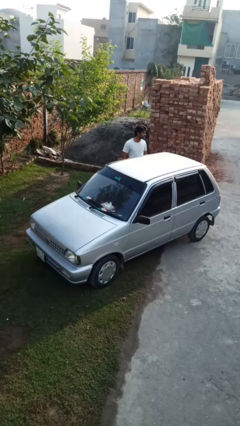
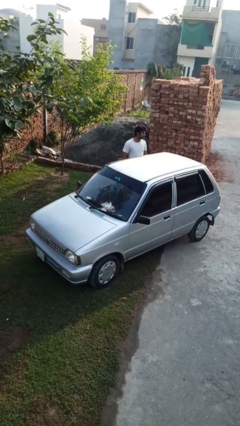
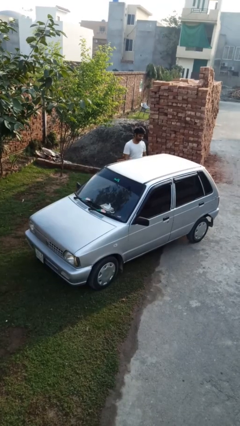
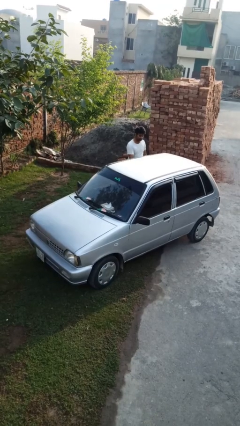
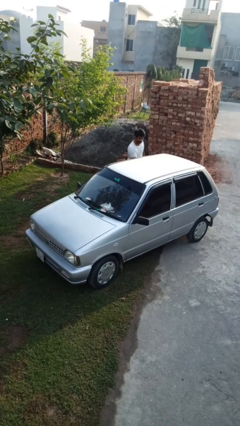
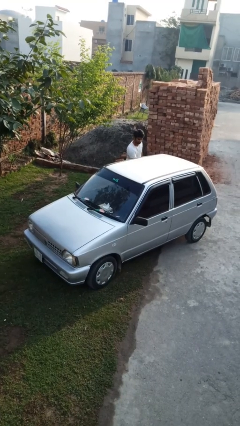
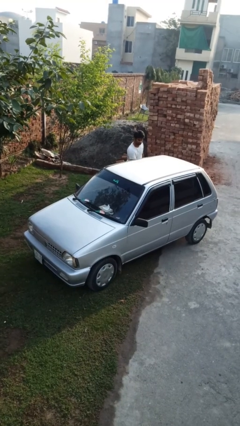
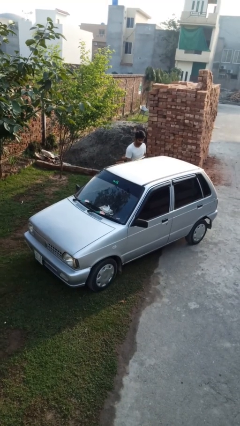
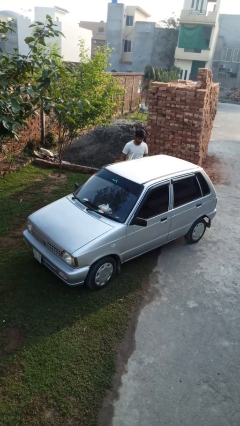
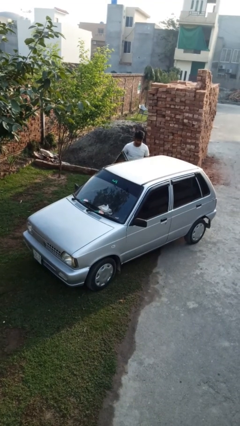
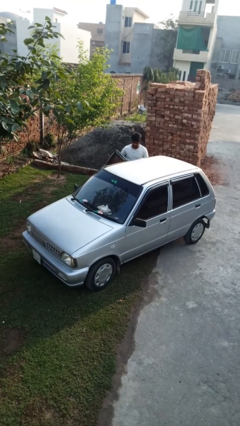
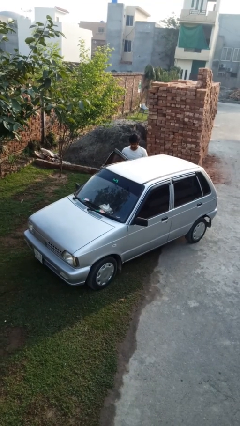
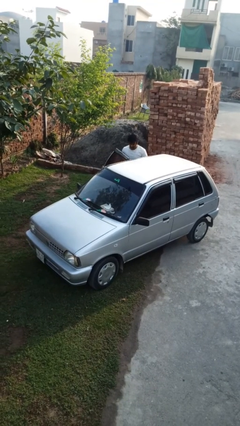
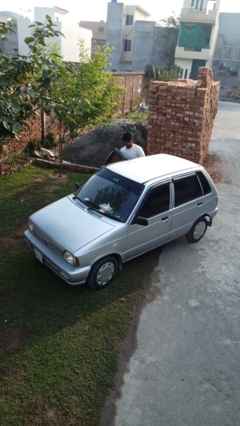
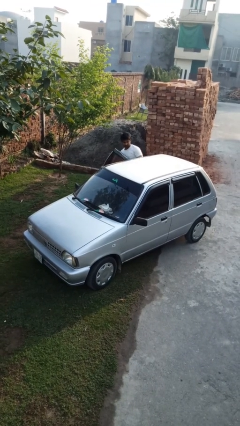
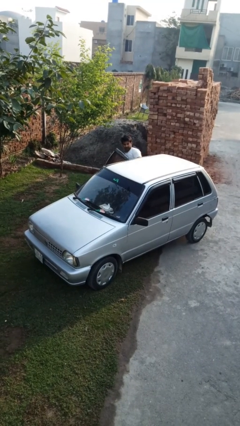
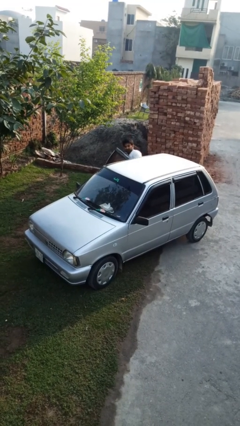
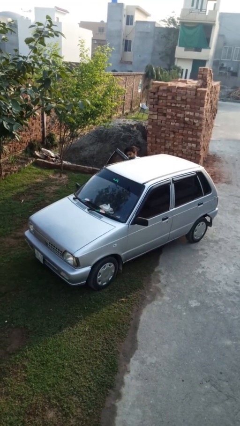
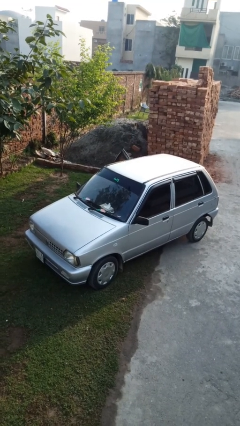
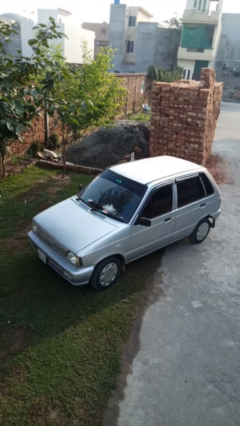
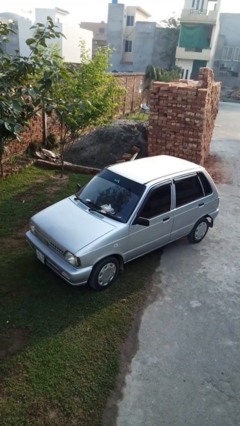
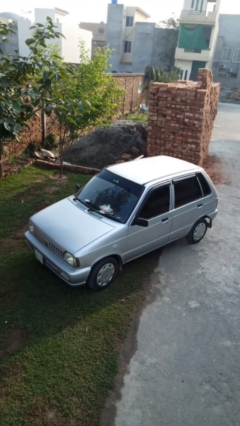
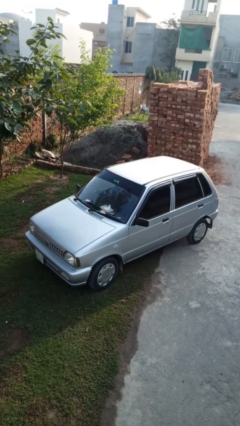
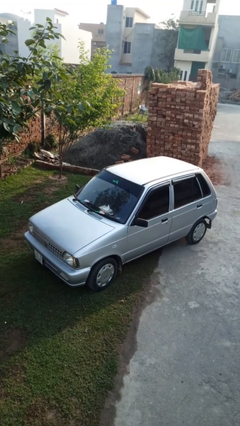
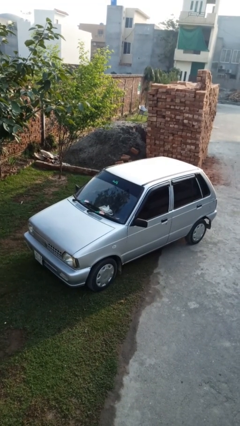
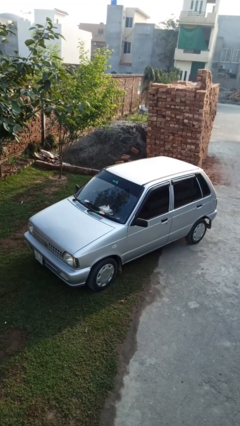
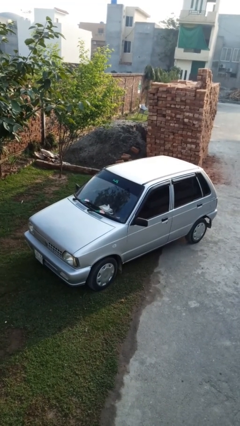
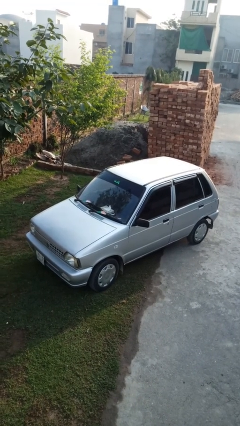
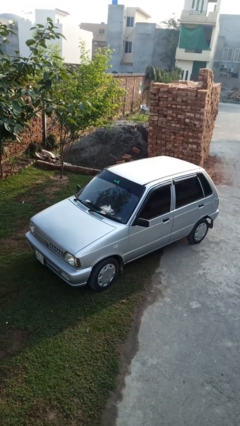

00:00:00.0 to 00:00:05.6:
car picks up person

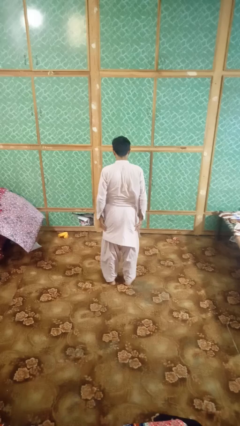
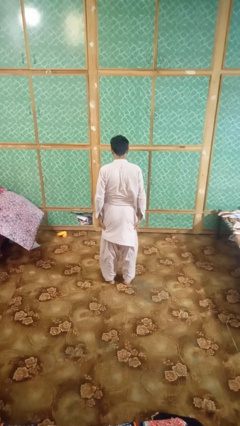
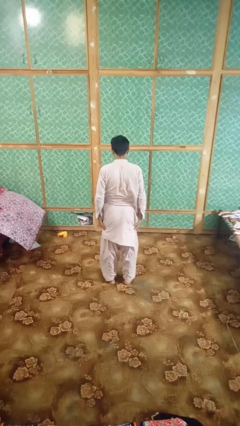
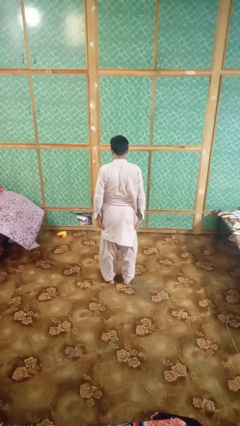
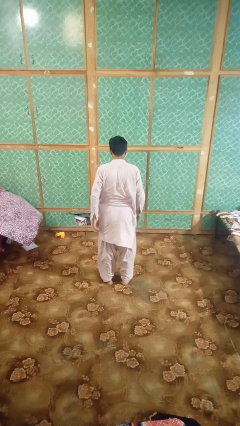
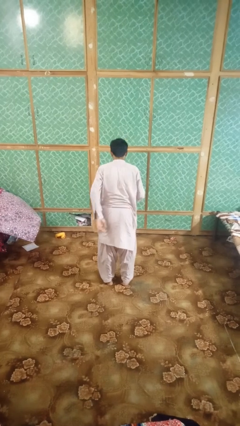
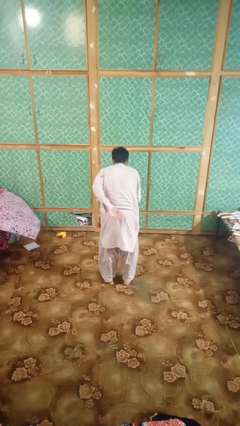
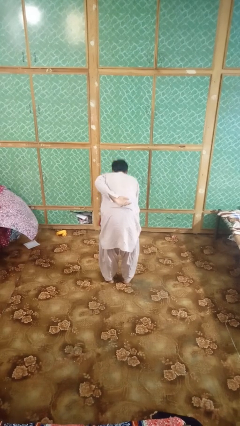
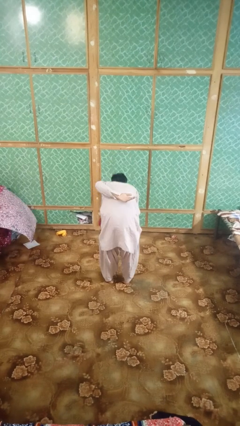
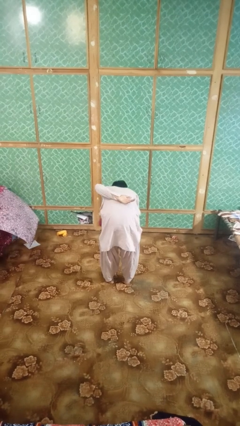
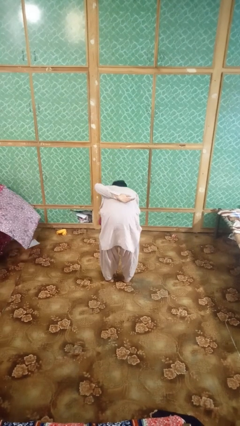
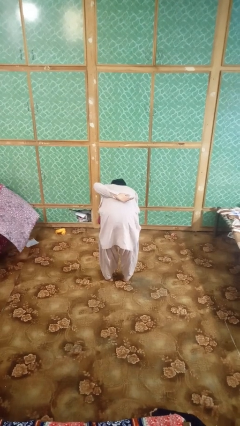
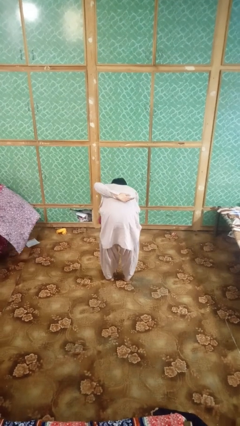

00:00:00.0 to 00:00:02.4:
person bows

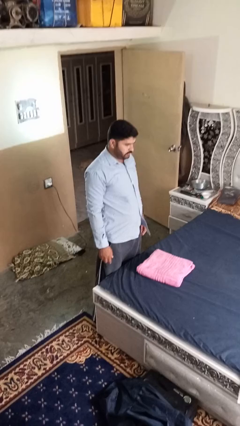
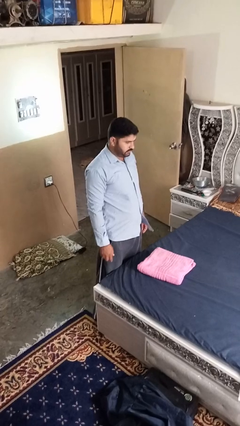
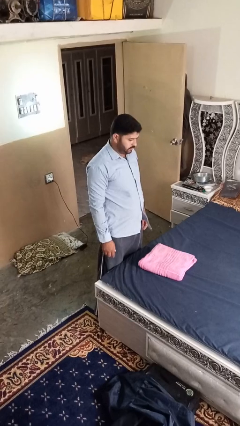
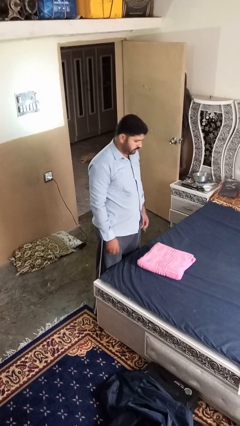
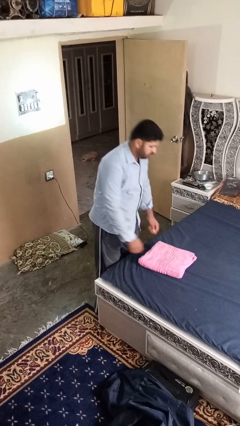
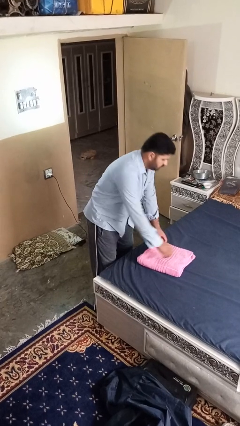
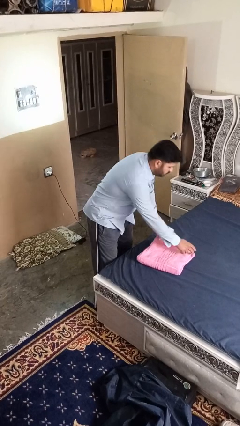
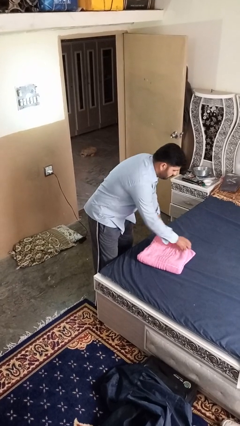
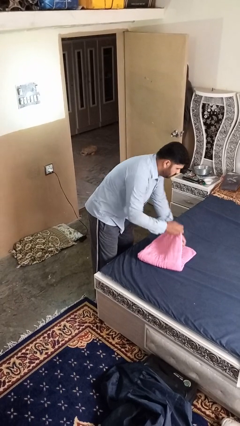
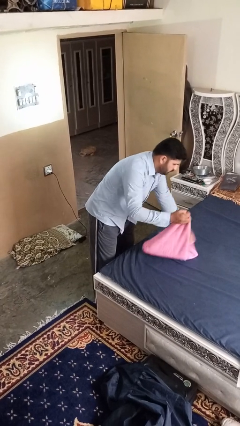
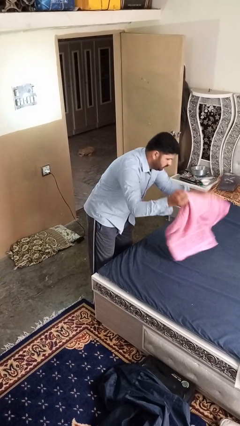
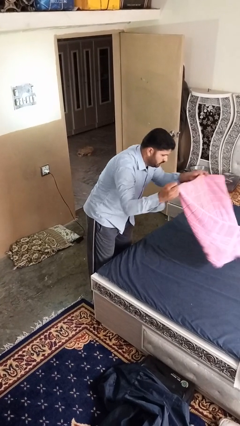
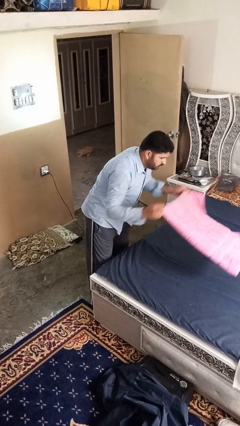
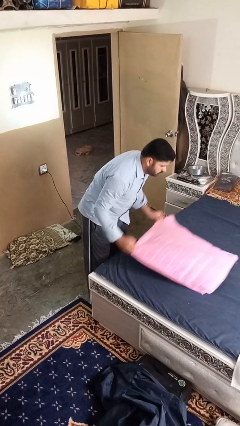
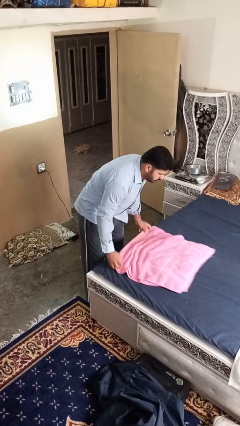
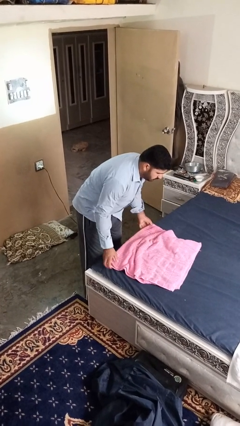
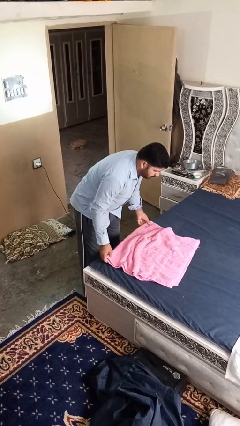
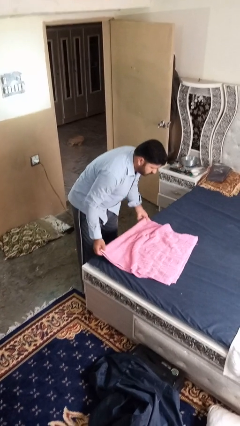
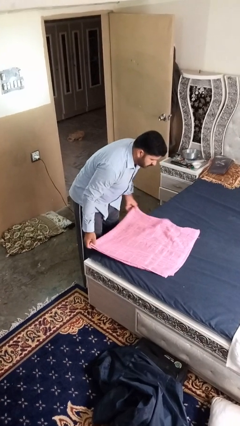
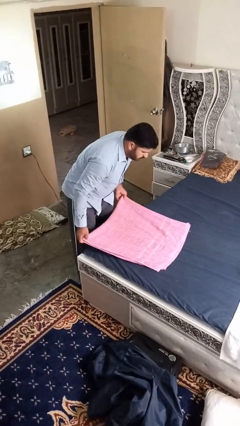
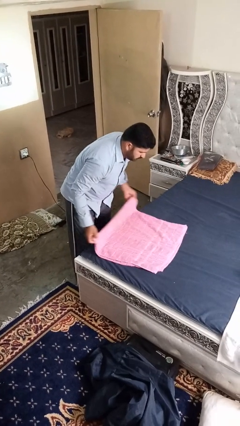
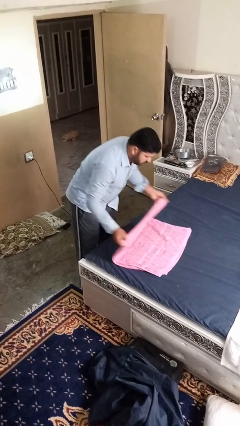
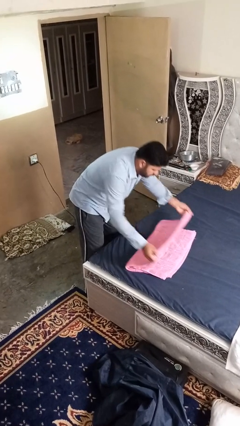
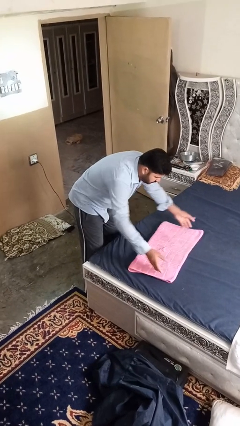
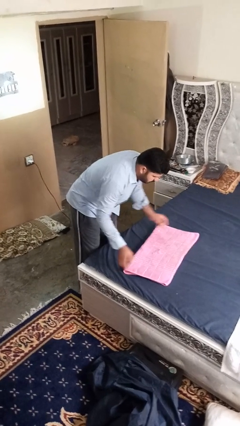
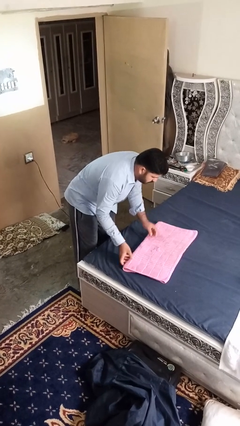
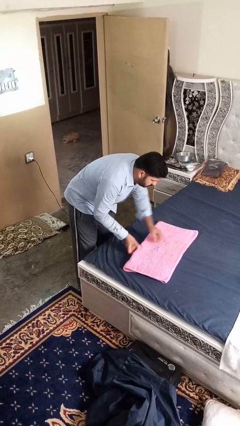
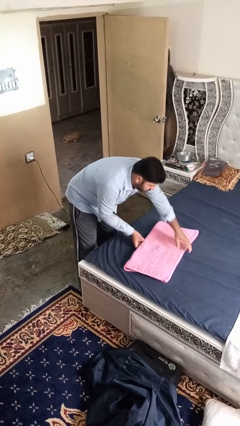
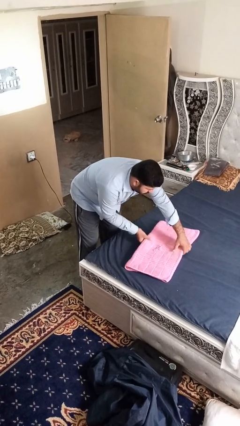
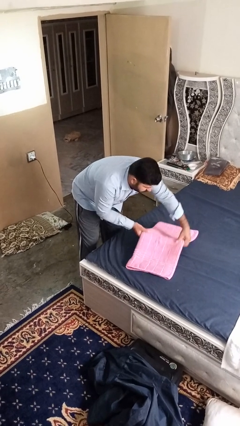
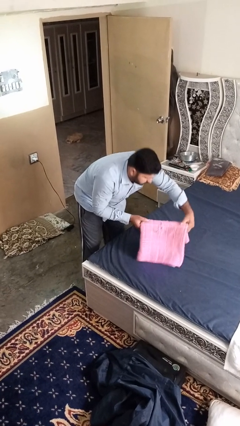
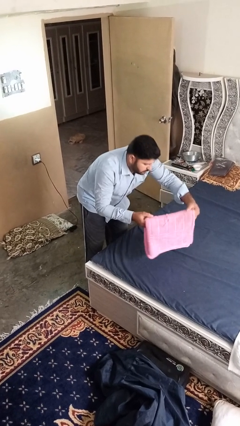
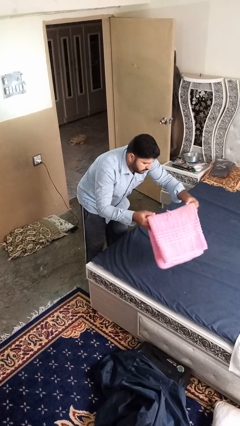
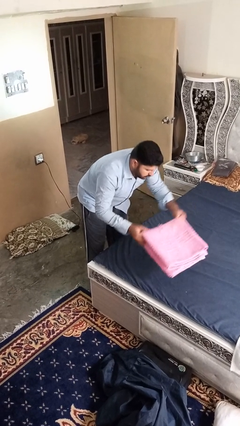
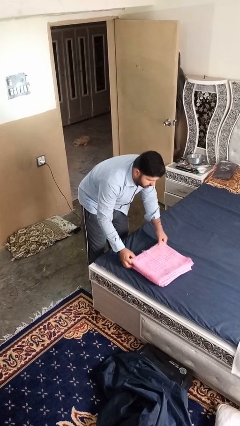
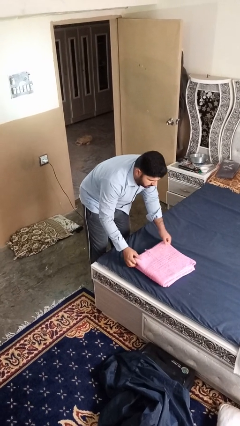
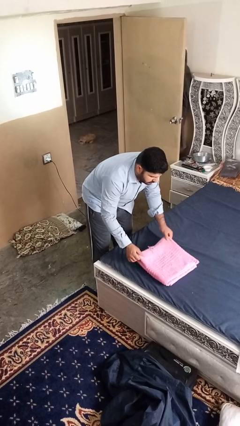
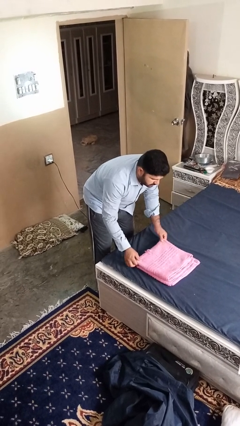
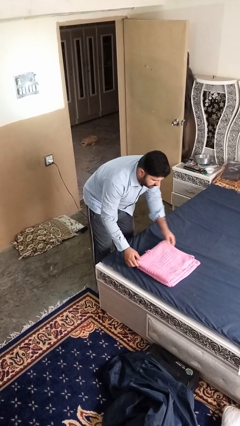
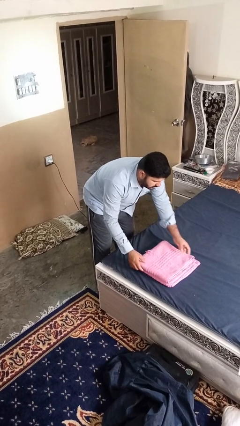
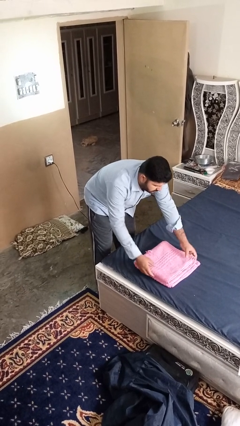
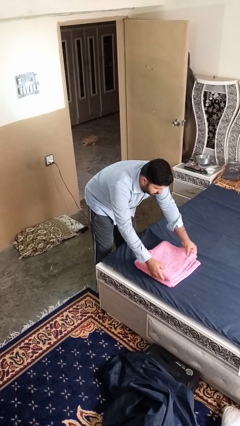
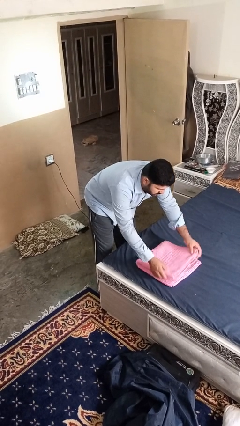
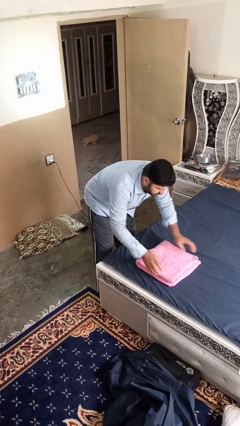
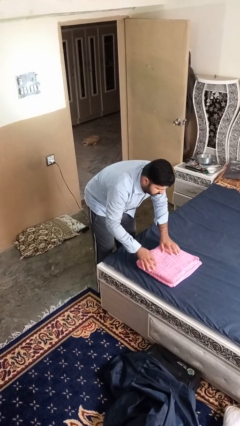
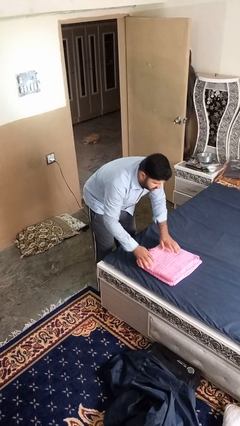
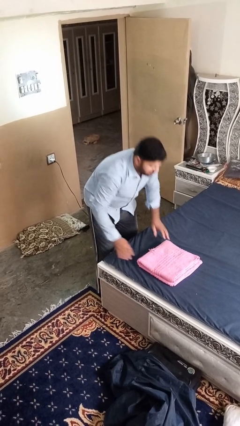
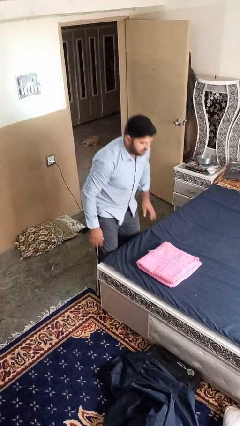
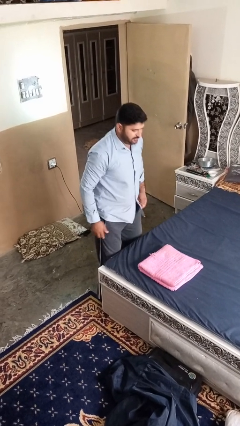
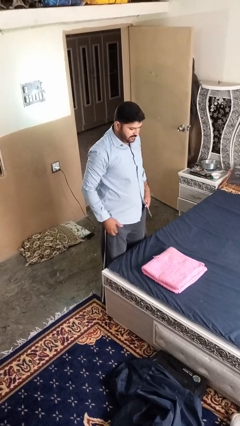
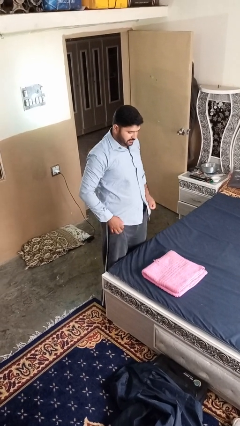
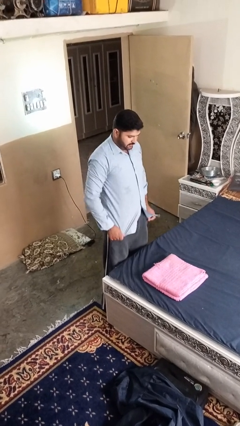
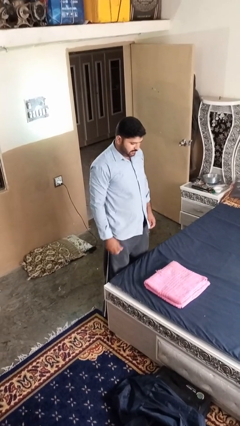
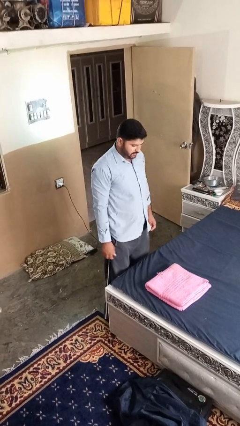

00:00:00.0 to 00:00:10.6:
person folds towel
